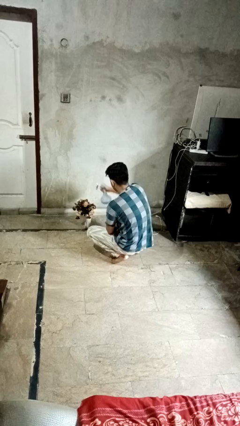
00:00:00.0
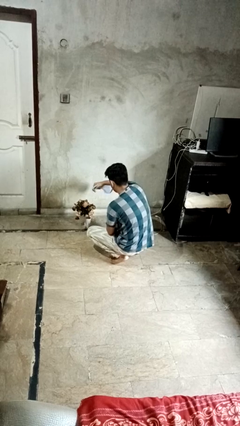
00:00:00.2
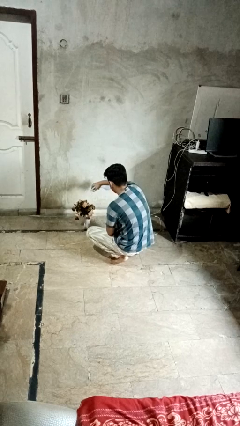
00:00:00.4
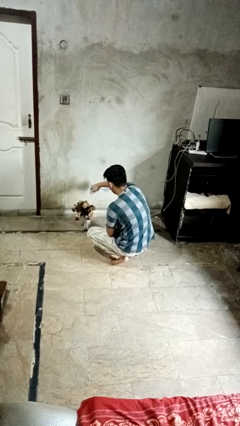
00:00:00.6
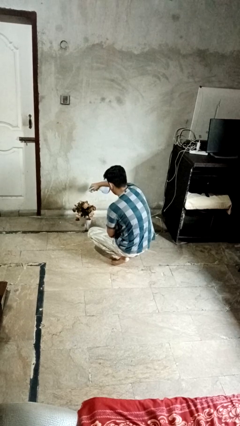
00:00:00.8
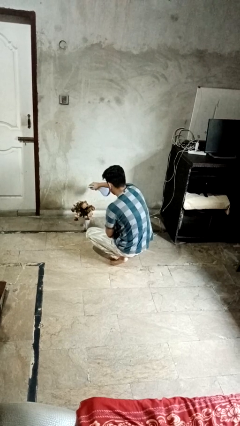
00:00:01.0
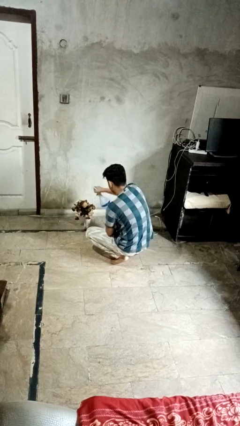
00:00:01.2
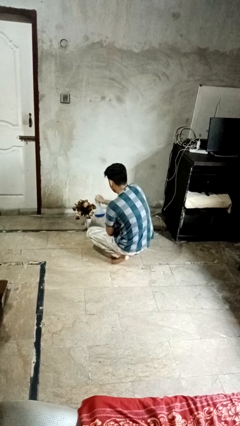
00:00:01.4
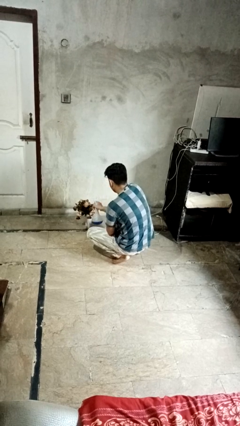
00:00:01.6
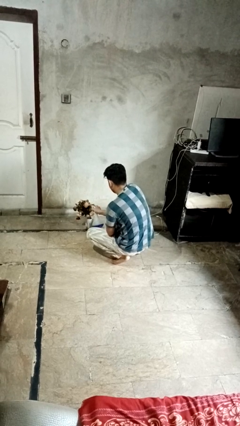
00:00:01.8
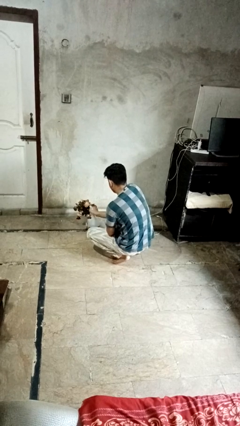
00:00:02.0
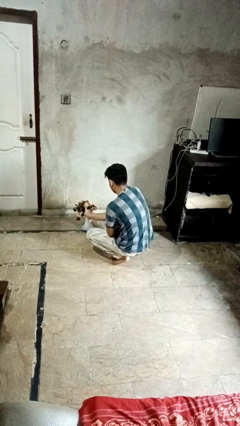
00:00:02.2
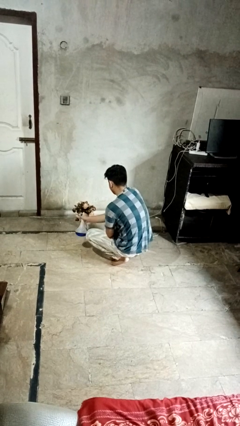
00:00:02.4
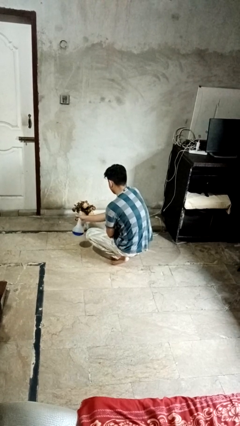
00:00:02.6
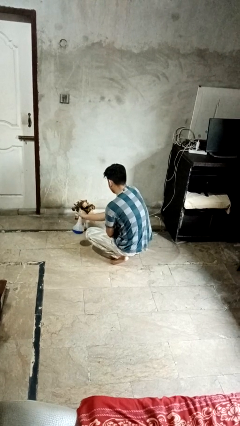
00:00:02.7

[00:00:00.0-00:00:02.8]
person waters houseplant

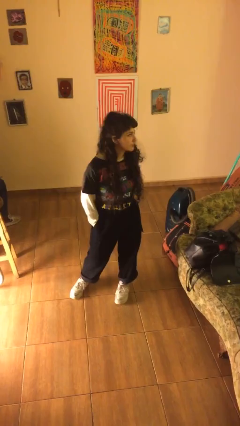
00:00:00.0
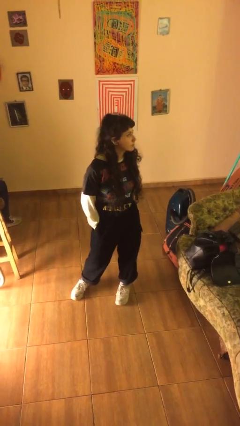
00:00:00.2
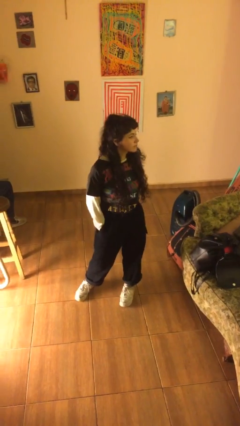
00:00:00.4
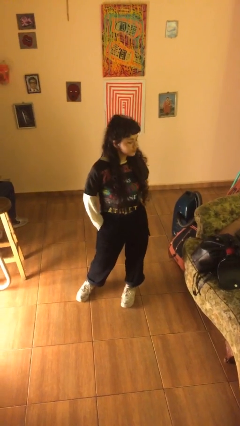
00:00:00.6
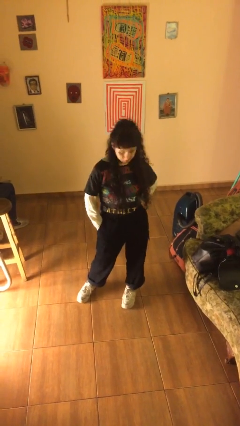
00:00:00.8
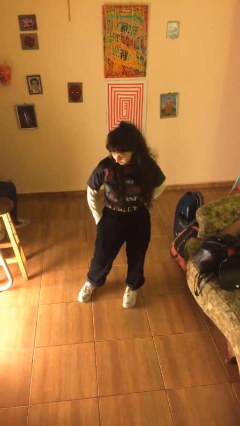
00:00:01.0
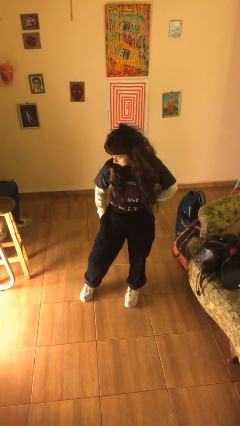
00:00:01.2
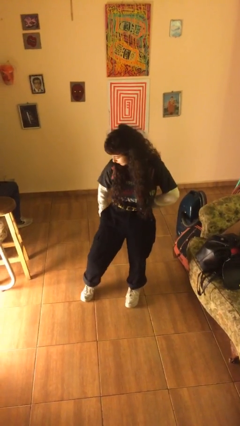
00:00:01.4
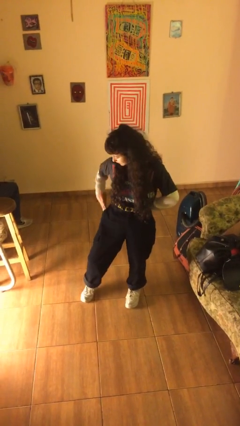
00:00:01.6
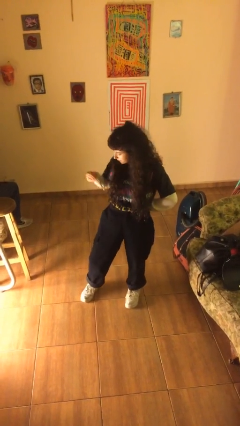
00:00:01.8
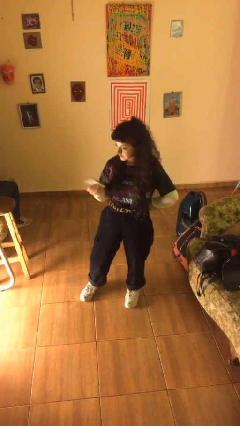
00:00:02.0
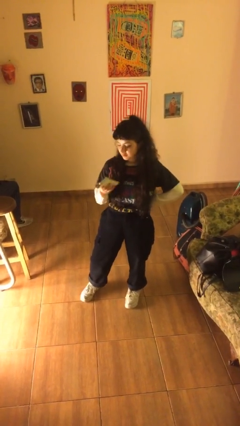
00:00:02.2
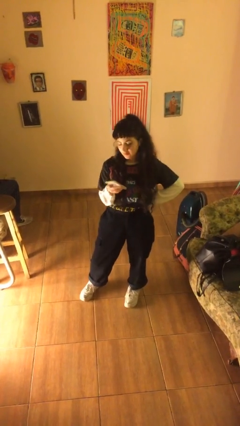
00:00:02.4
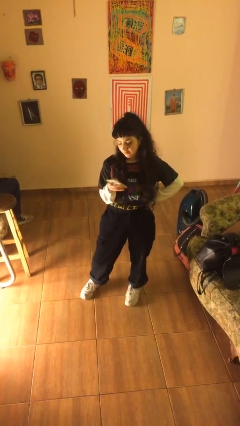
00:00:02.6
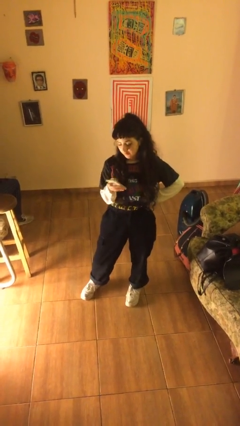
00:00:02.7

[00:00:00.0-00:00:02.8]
person takes phone from pocket

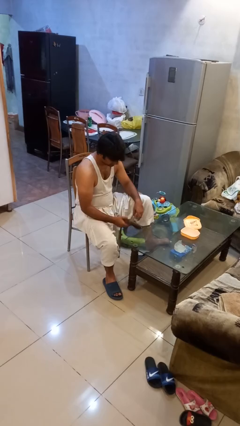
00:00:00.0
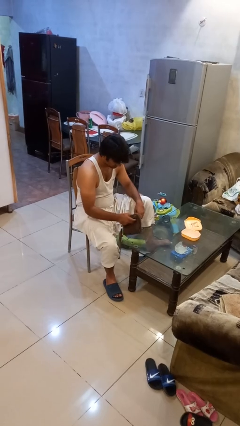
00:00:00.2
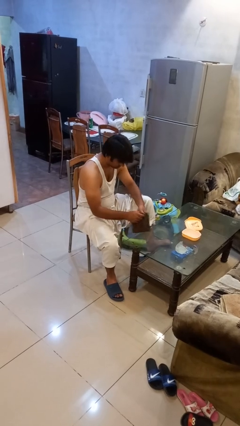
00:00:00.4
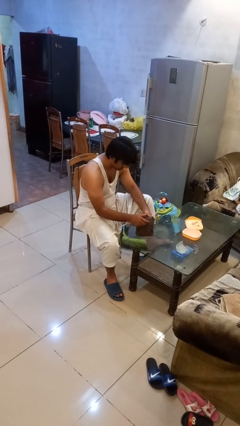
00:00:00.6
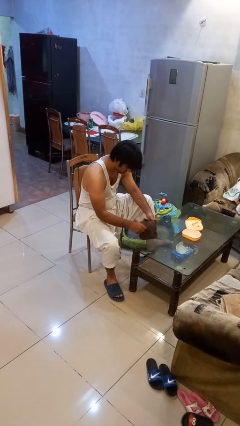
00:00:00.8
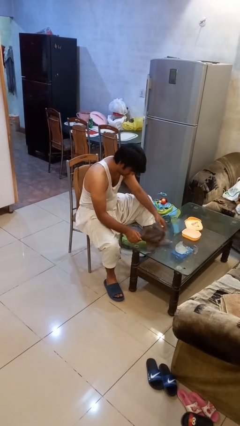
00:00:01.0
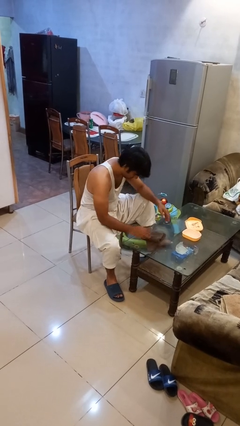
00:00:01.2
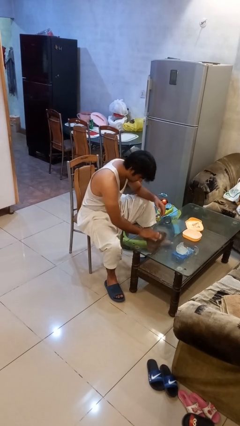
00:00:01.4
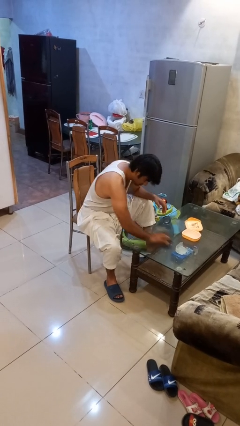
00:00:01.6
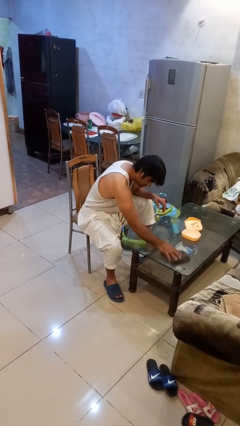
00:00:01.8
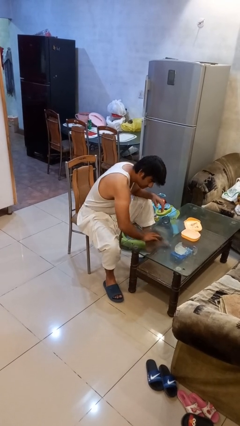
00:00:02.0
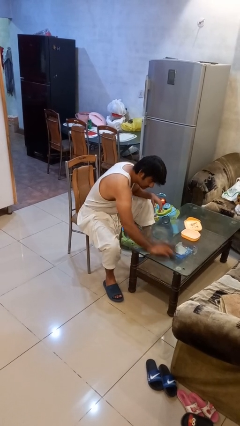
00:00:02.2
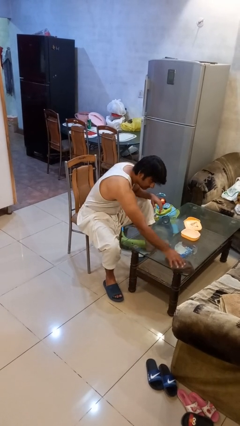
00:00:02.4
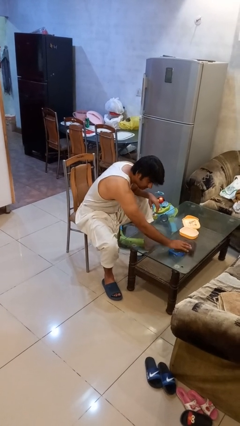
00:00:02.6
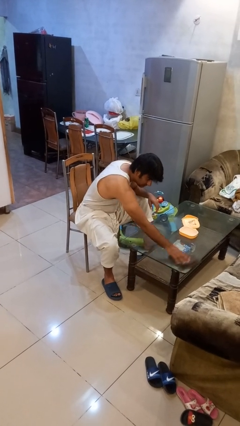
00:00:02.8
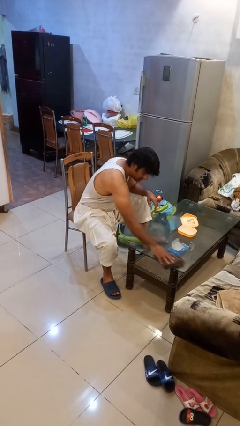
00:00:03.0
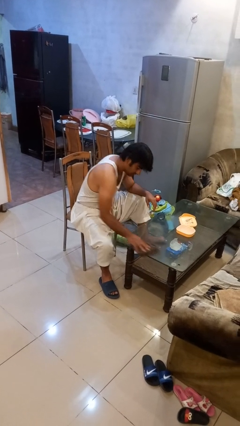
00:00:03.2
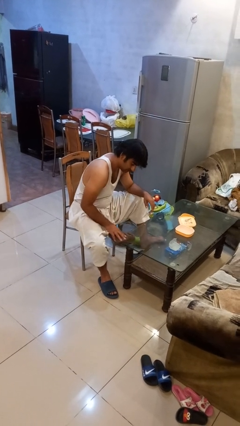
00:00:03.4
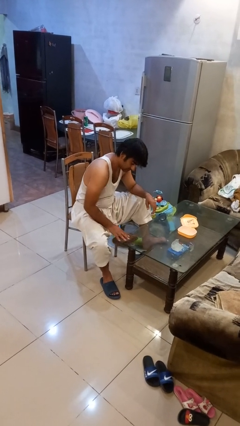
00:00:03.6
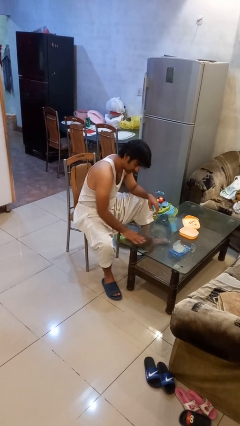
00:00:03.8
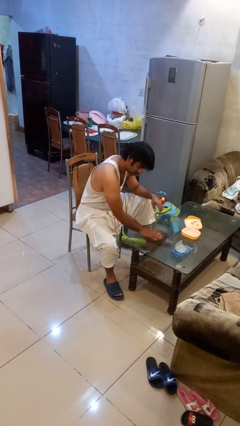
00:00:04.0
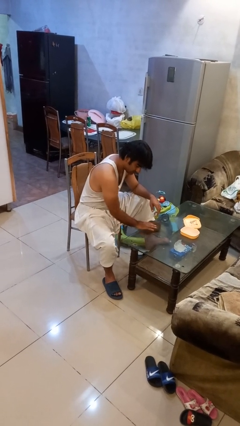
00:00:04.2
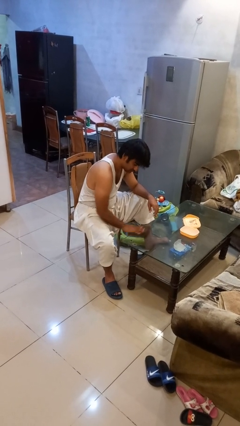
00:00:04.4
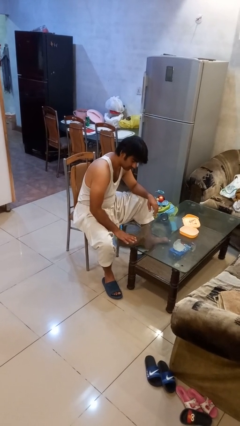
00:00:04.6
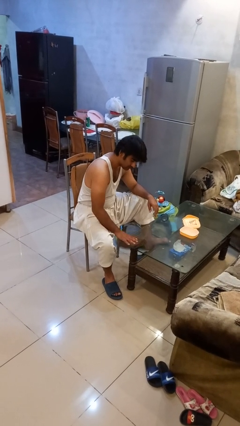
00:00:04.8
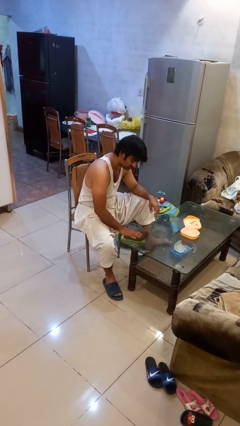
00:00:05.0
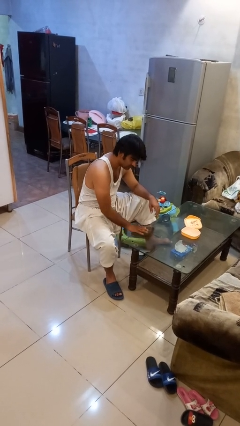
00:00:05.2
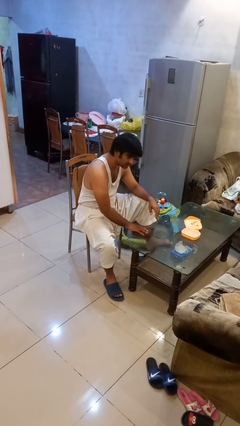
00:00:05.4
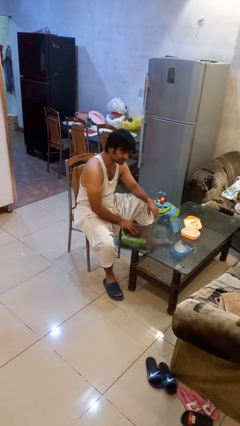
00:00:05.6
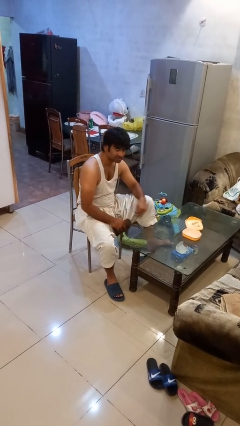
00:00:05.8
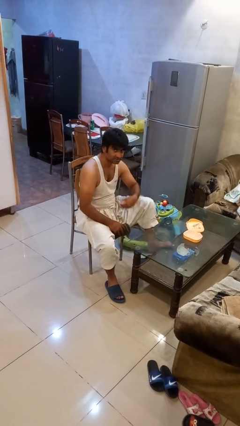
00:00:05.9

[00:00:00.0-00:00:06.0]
person cleans table with rag

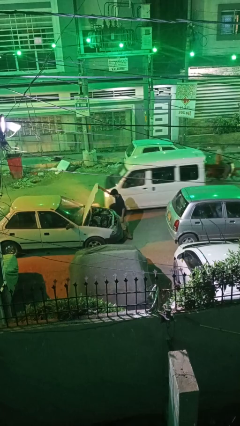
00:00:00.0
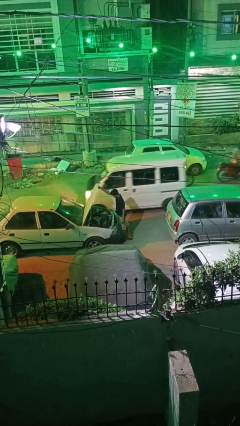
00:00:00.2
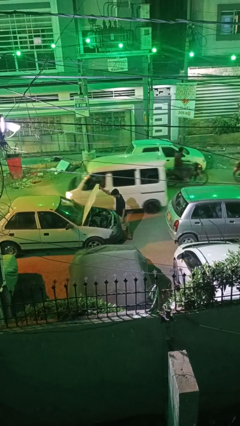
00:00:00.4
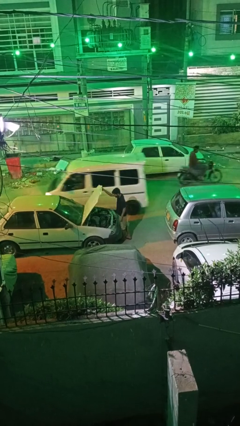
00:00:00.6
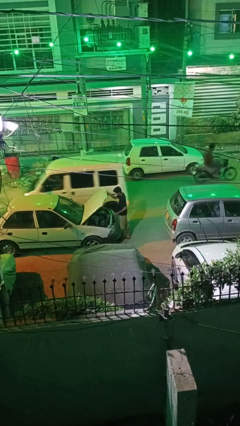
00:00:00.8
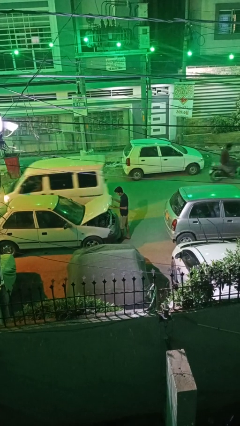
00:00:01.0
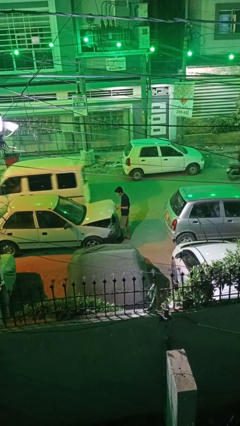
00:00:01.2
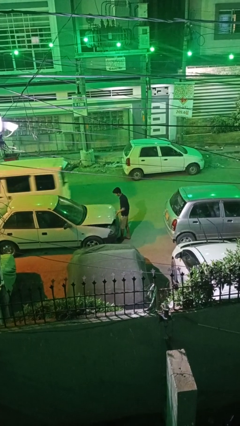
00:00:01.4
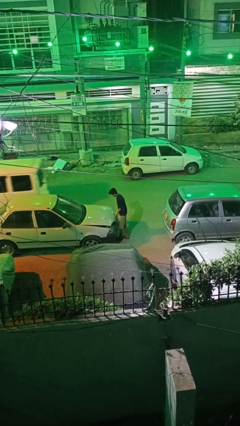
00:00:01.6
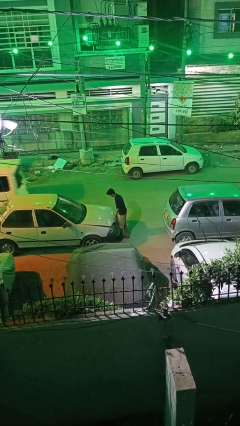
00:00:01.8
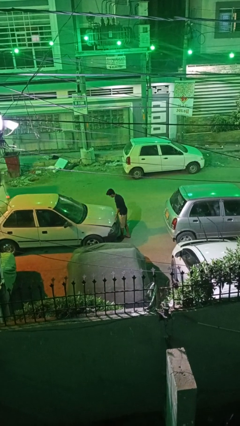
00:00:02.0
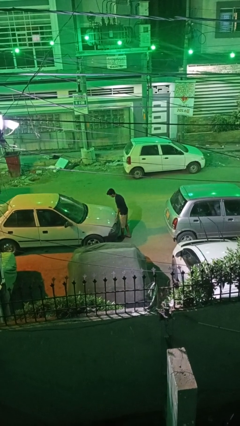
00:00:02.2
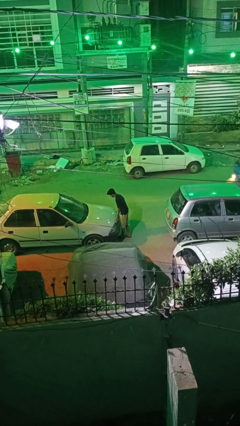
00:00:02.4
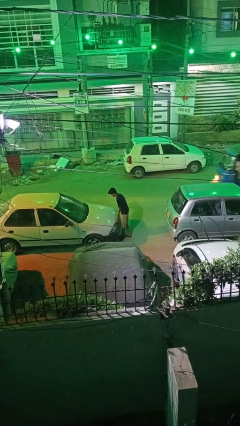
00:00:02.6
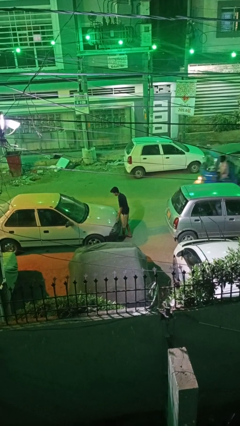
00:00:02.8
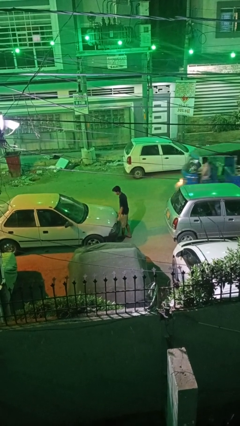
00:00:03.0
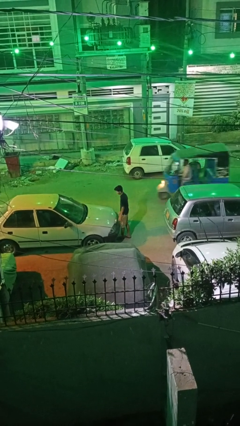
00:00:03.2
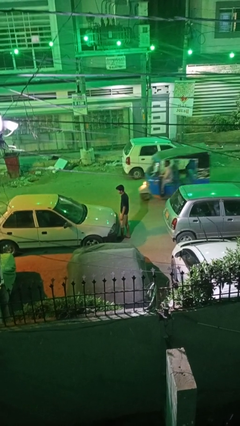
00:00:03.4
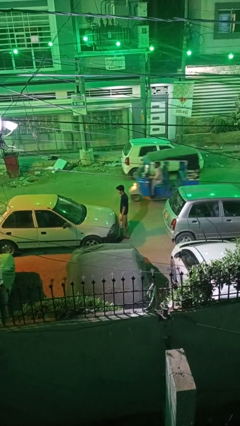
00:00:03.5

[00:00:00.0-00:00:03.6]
person closes car hood

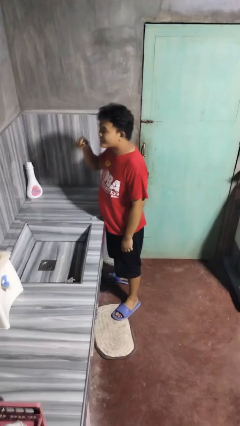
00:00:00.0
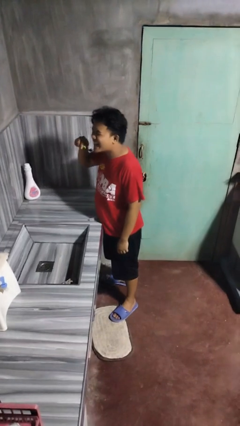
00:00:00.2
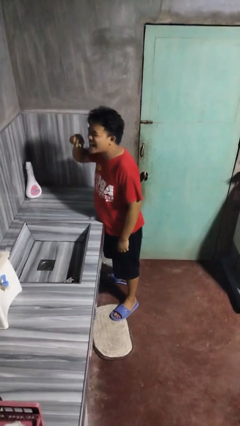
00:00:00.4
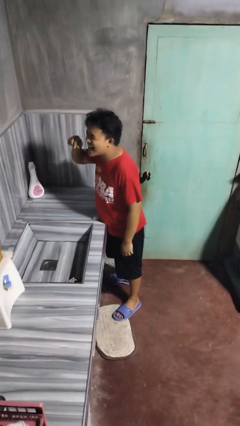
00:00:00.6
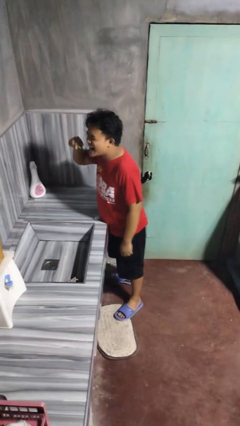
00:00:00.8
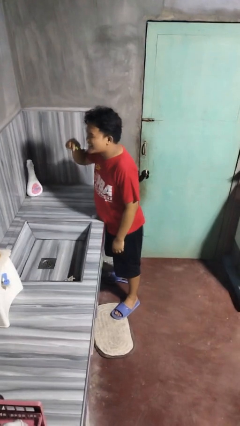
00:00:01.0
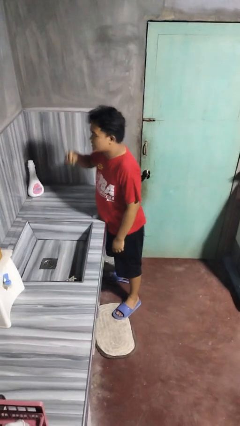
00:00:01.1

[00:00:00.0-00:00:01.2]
person brushes teeth

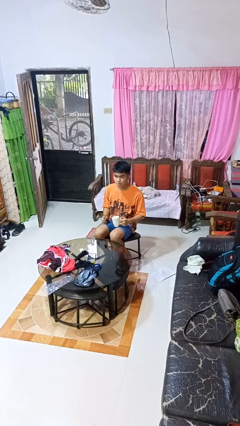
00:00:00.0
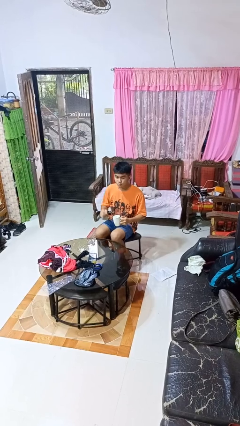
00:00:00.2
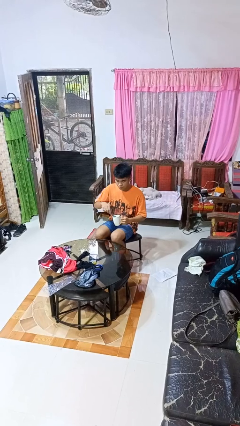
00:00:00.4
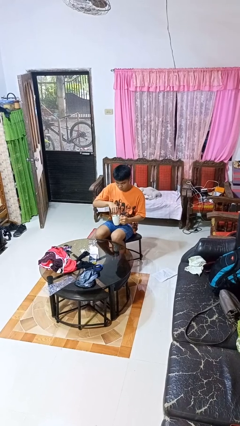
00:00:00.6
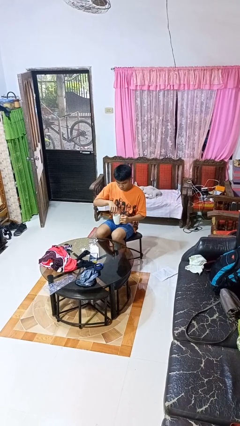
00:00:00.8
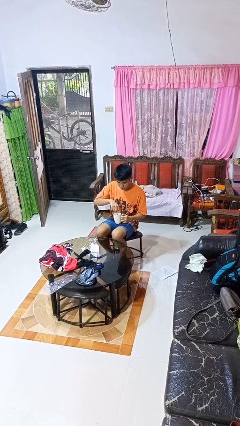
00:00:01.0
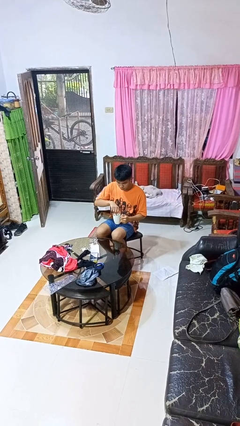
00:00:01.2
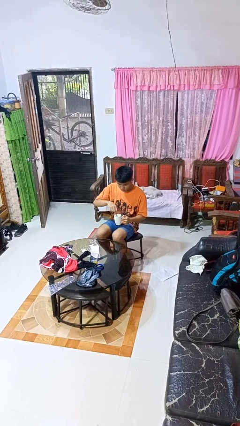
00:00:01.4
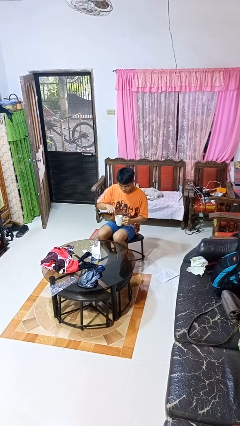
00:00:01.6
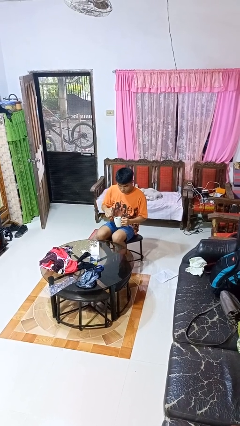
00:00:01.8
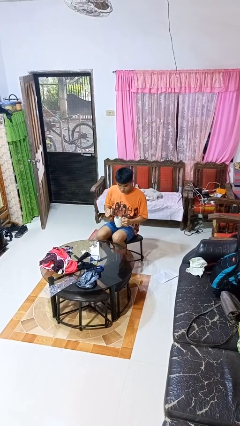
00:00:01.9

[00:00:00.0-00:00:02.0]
person stirs mug
